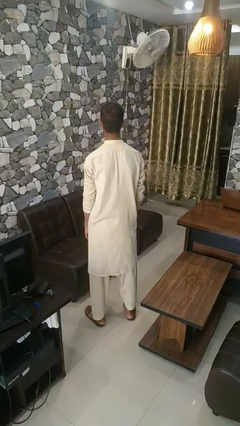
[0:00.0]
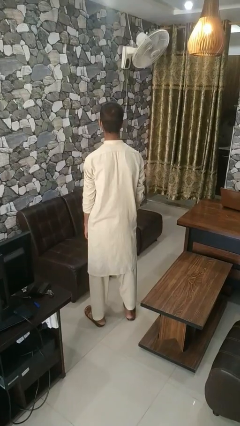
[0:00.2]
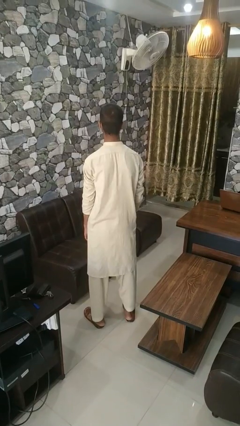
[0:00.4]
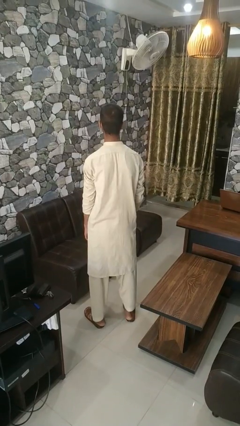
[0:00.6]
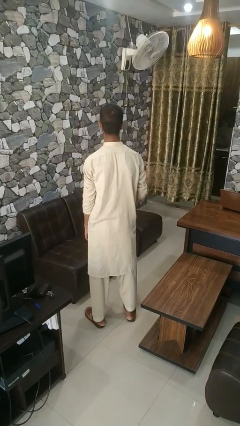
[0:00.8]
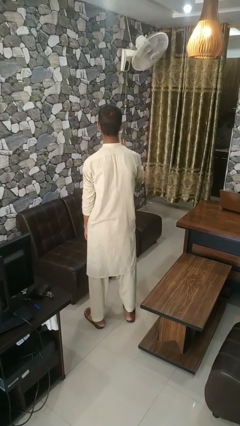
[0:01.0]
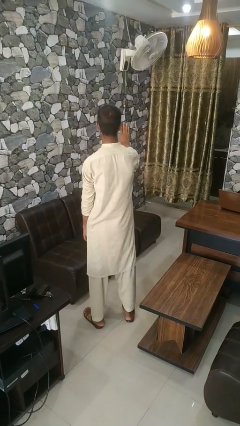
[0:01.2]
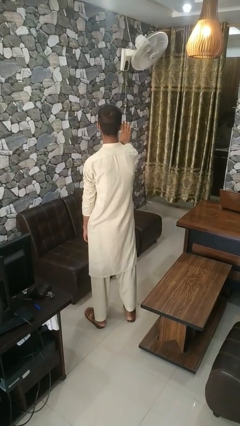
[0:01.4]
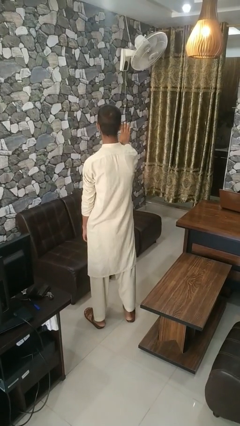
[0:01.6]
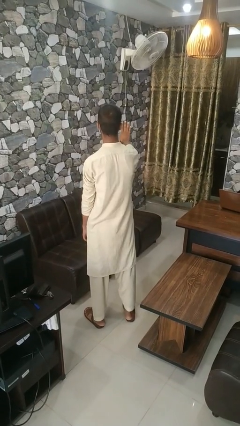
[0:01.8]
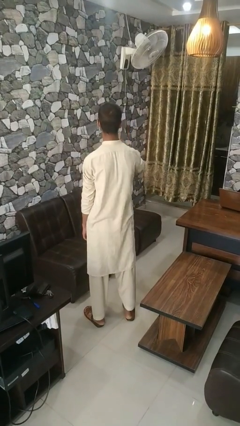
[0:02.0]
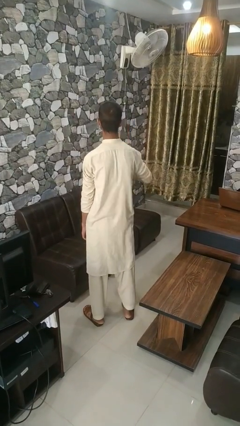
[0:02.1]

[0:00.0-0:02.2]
person gestures number four

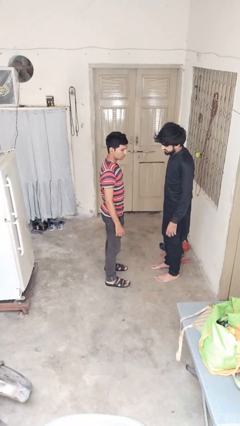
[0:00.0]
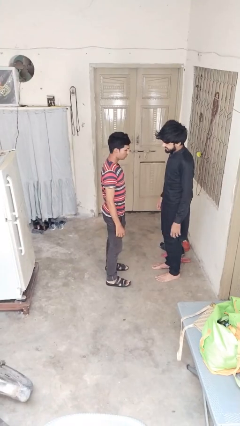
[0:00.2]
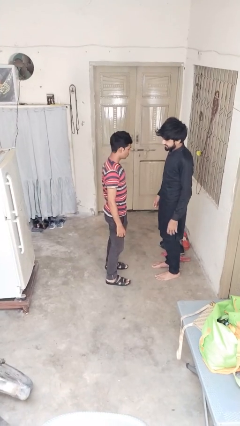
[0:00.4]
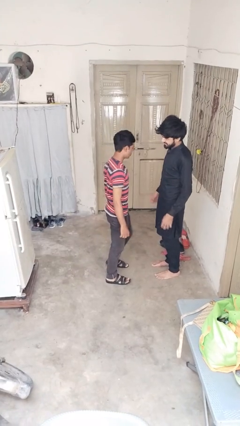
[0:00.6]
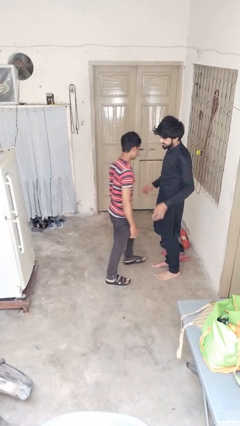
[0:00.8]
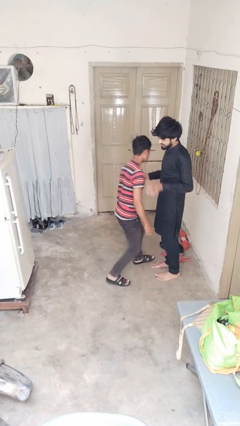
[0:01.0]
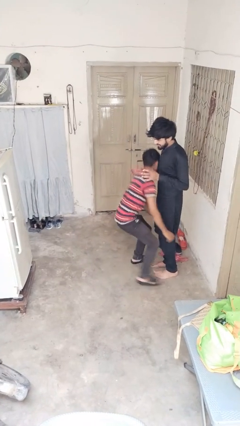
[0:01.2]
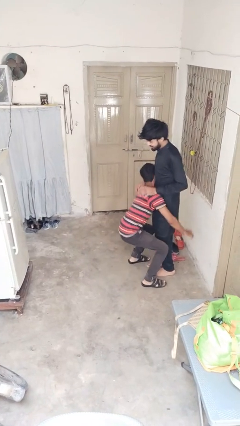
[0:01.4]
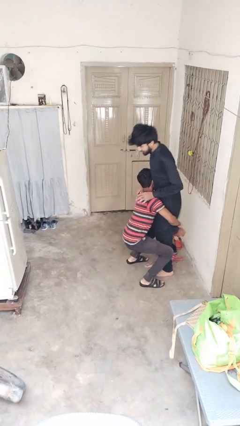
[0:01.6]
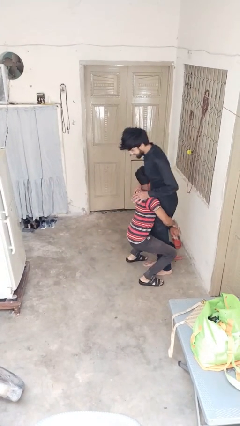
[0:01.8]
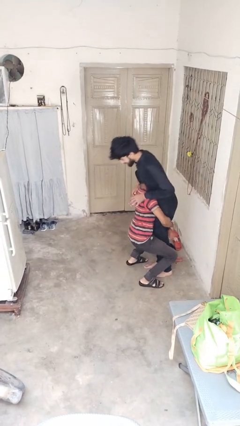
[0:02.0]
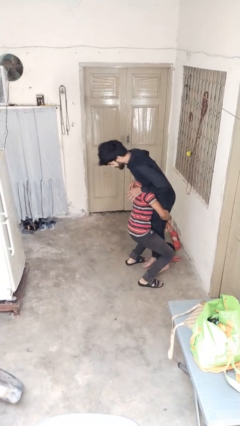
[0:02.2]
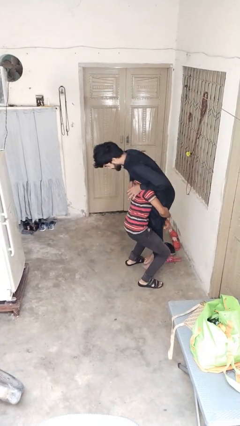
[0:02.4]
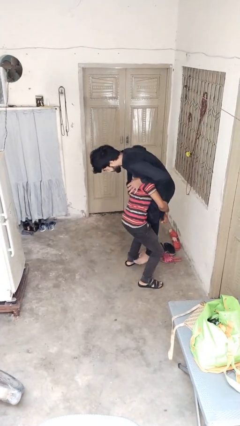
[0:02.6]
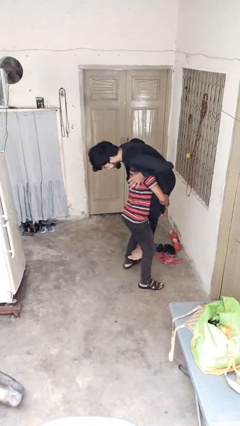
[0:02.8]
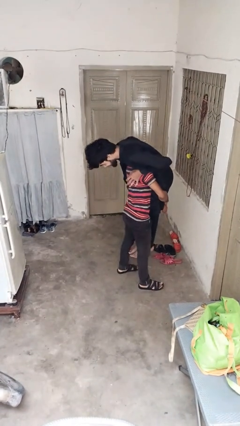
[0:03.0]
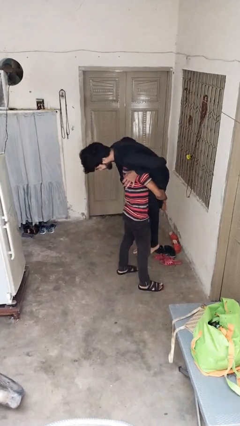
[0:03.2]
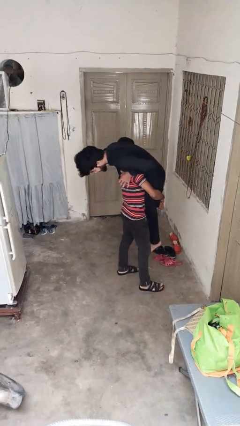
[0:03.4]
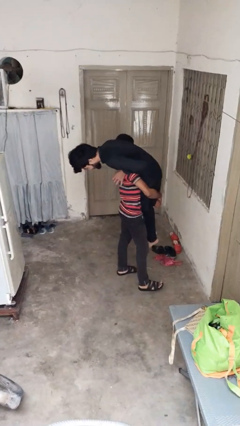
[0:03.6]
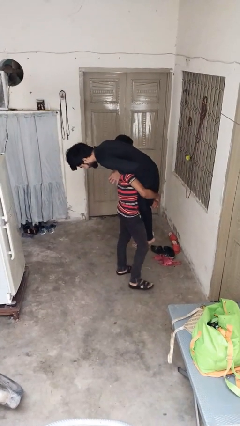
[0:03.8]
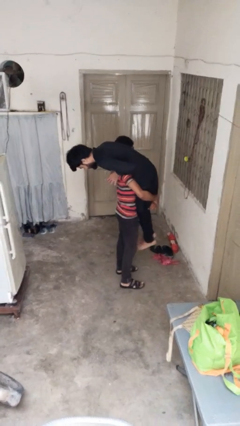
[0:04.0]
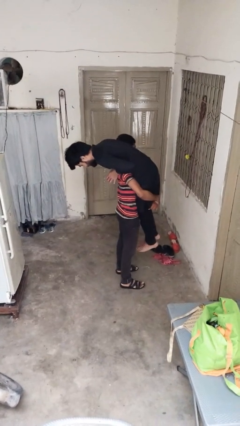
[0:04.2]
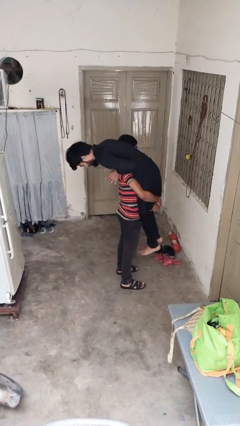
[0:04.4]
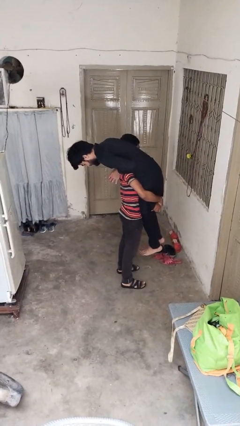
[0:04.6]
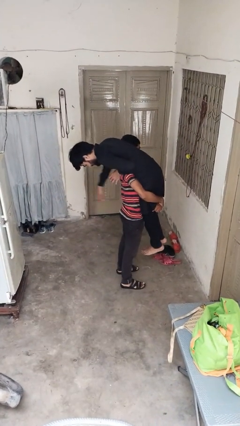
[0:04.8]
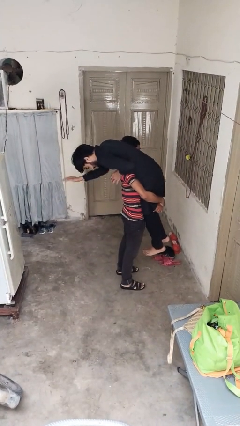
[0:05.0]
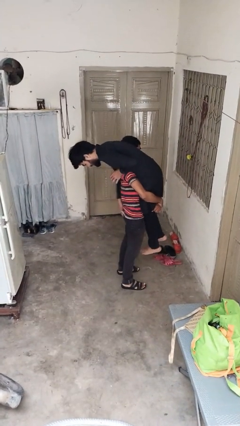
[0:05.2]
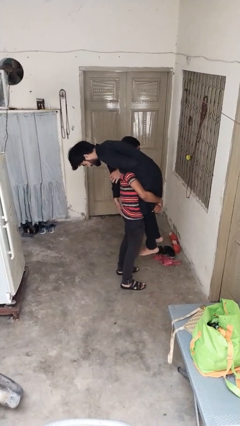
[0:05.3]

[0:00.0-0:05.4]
person carries person over shoulder

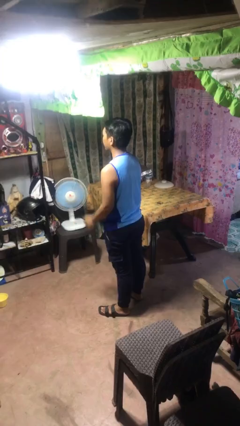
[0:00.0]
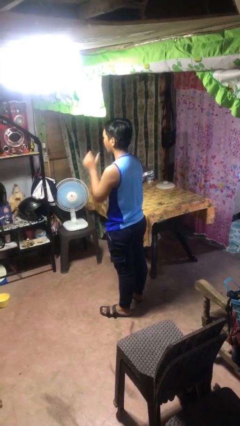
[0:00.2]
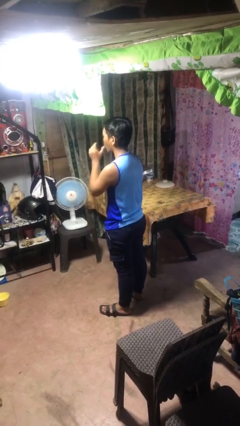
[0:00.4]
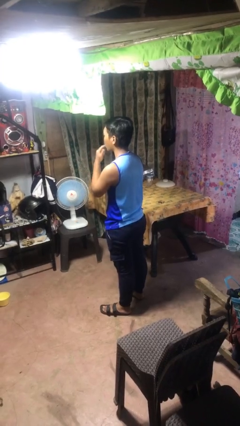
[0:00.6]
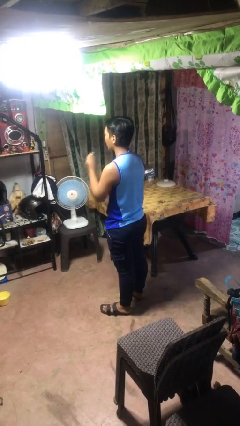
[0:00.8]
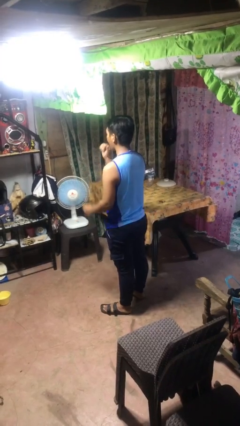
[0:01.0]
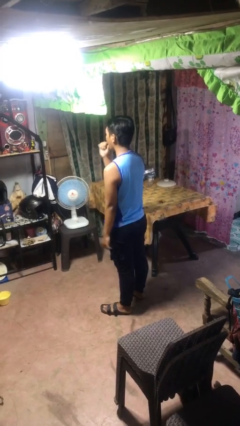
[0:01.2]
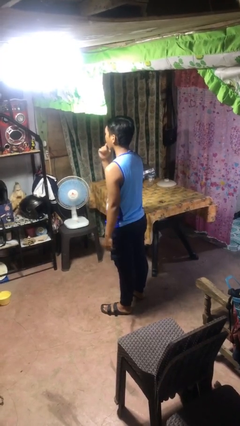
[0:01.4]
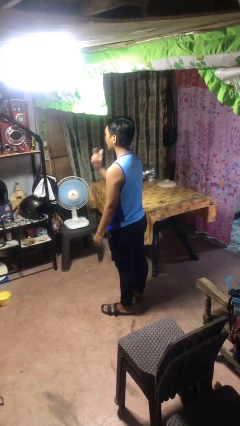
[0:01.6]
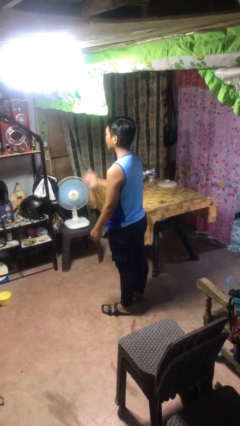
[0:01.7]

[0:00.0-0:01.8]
person licks fingers

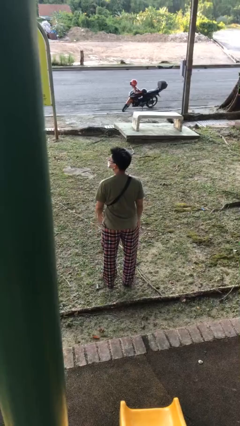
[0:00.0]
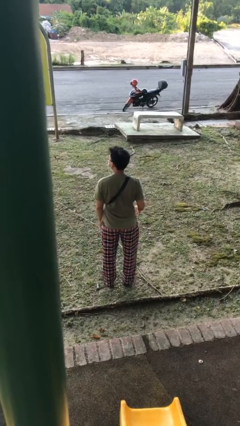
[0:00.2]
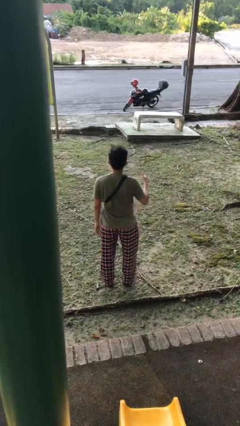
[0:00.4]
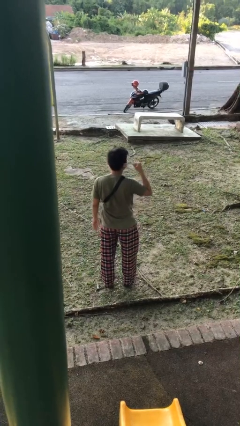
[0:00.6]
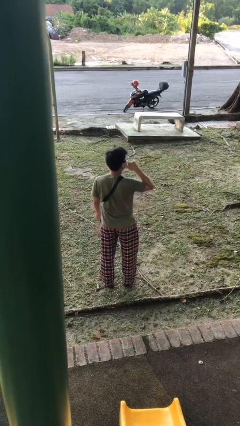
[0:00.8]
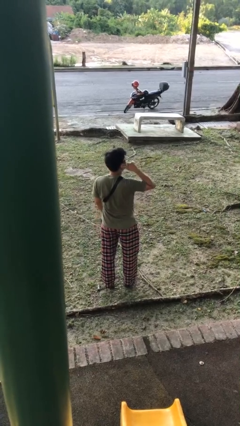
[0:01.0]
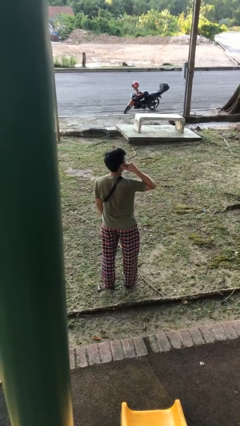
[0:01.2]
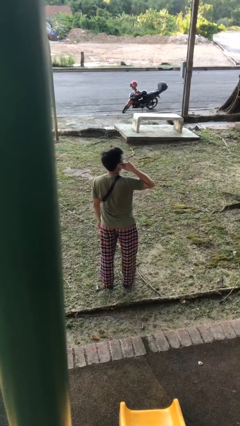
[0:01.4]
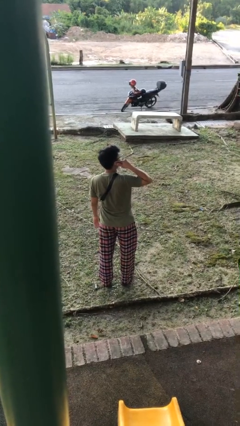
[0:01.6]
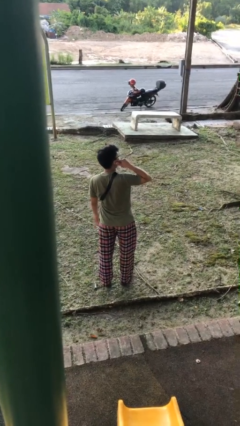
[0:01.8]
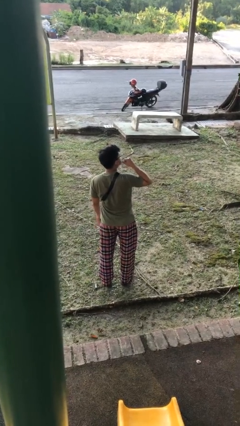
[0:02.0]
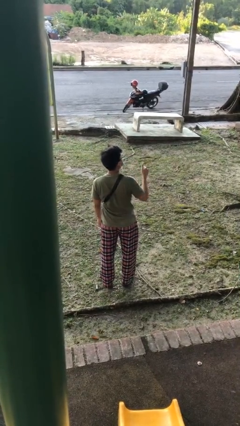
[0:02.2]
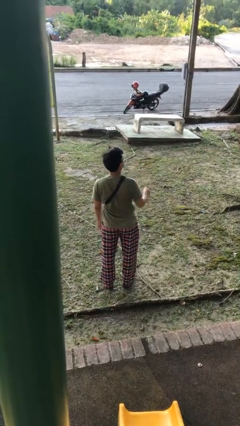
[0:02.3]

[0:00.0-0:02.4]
person gestures call me

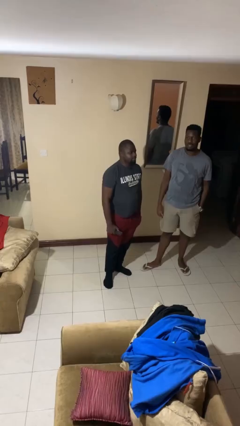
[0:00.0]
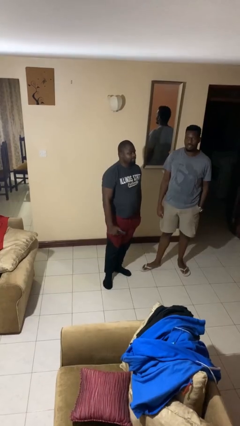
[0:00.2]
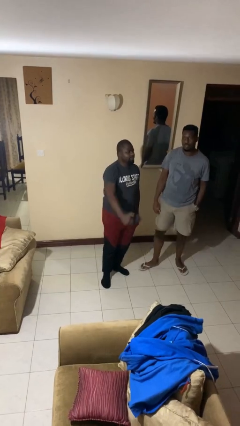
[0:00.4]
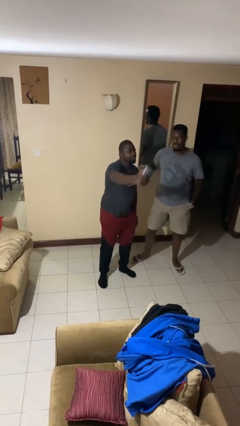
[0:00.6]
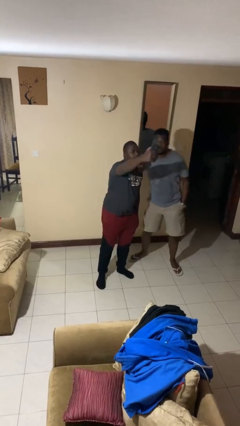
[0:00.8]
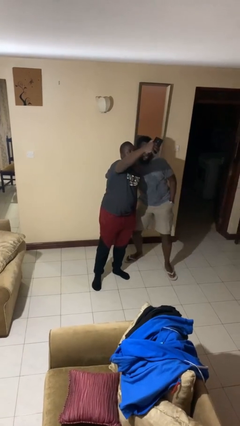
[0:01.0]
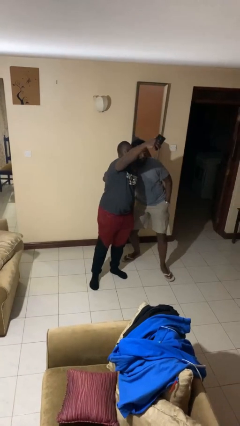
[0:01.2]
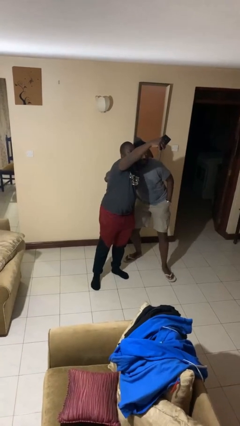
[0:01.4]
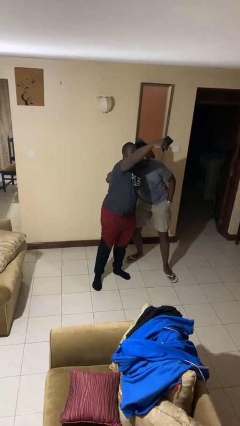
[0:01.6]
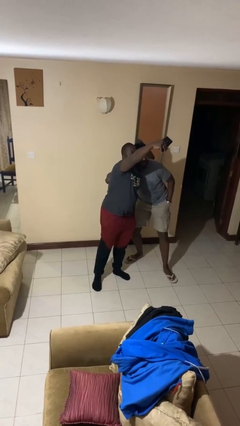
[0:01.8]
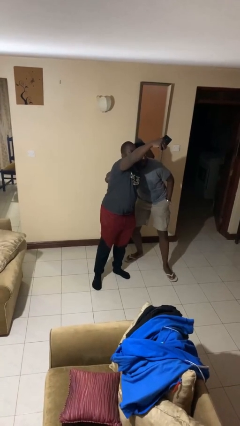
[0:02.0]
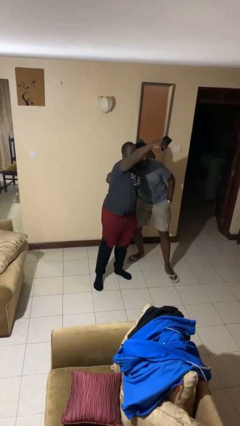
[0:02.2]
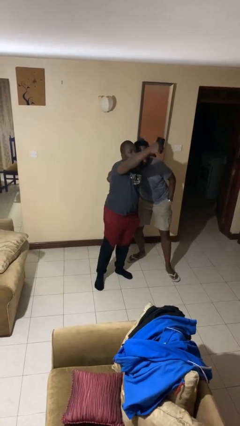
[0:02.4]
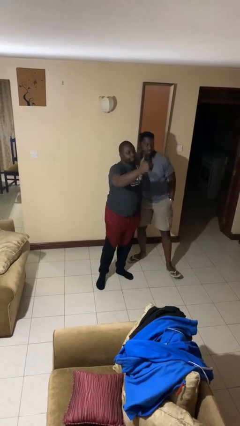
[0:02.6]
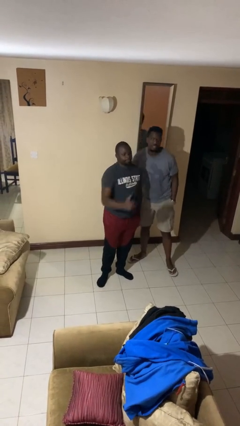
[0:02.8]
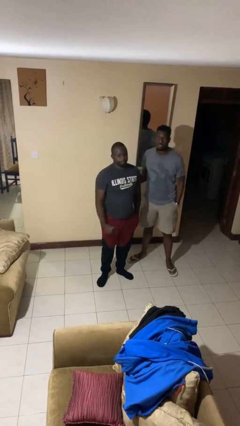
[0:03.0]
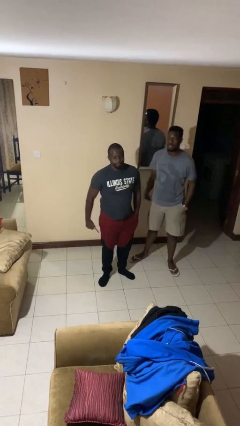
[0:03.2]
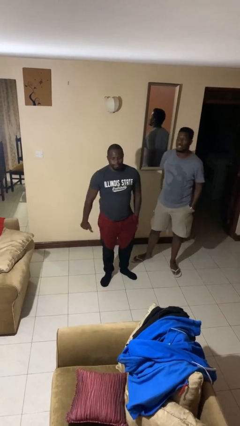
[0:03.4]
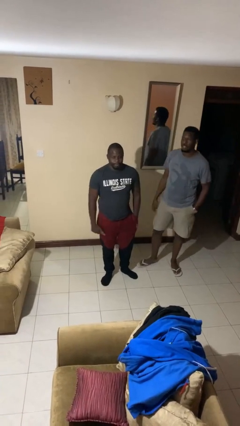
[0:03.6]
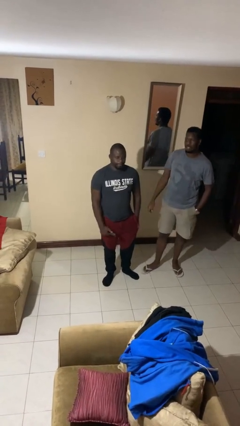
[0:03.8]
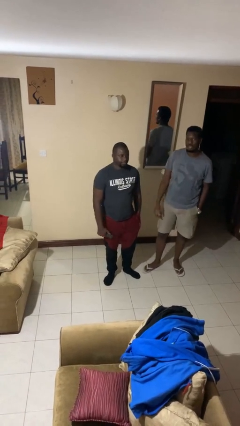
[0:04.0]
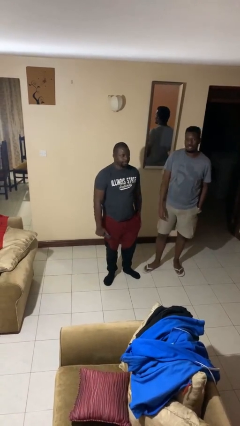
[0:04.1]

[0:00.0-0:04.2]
person takes selfie with person

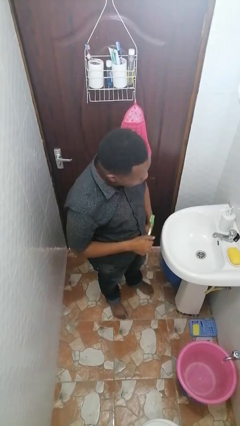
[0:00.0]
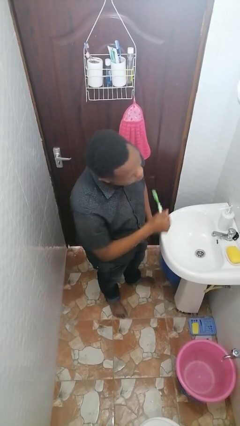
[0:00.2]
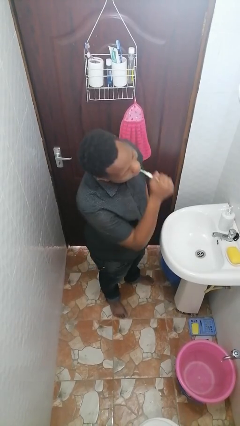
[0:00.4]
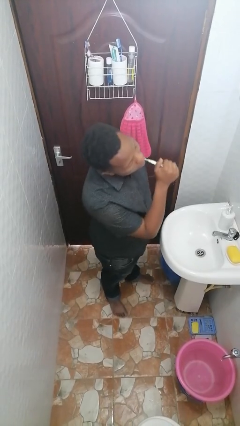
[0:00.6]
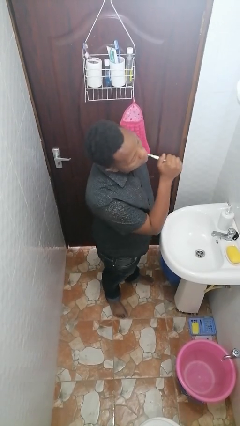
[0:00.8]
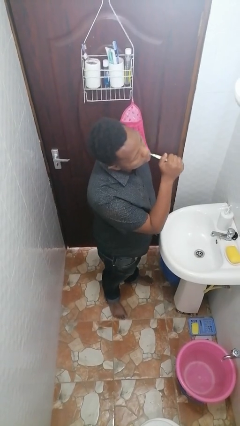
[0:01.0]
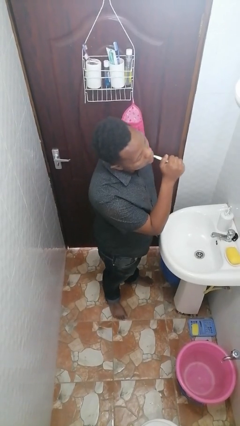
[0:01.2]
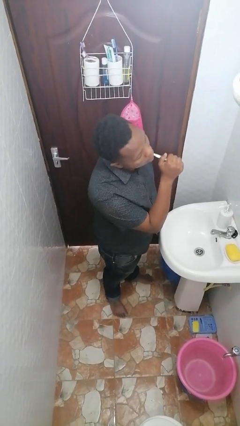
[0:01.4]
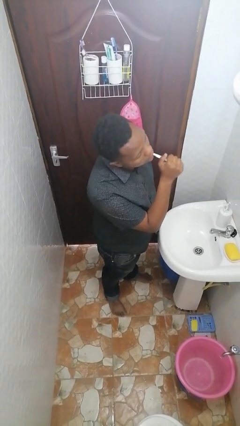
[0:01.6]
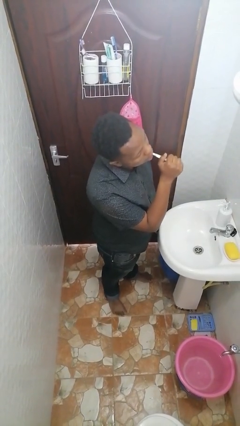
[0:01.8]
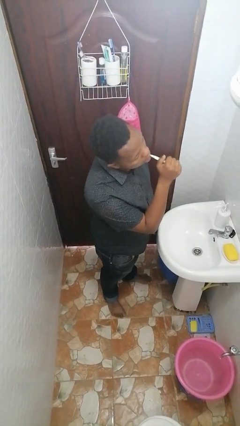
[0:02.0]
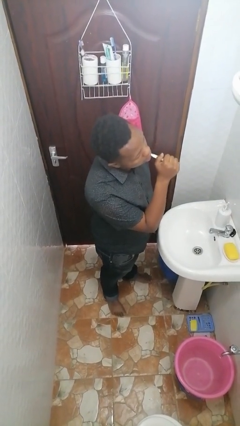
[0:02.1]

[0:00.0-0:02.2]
person brushes teeth
